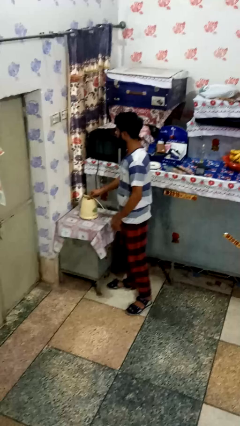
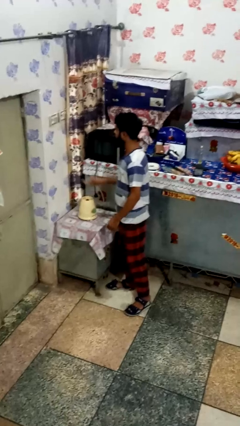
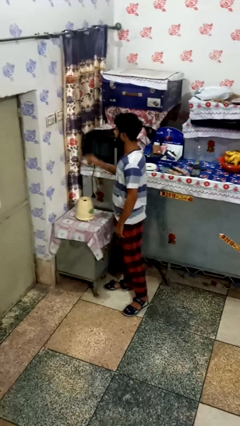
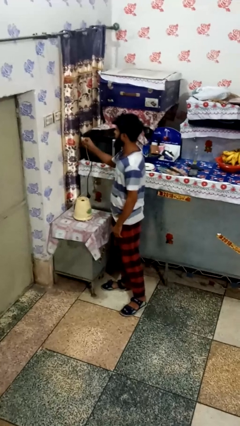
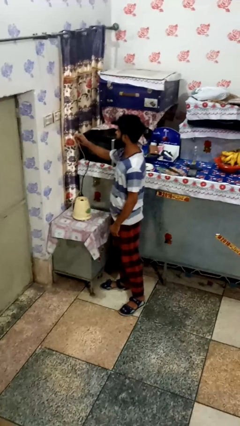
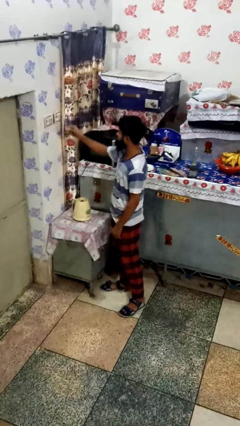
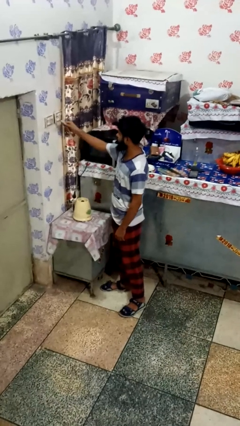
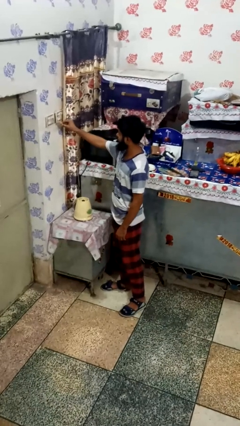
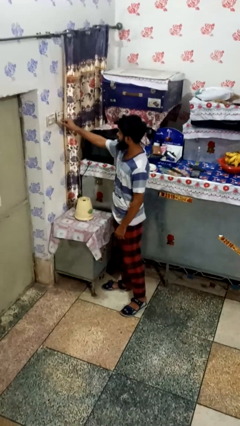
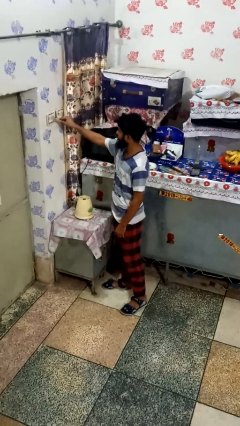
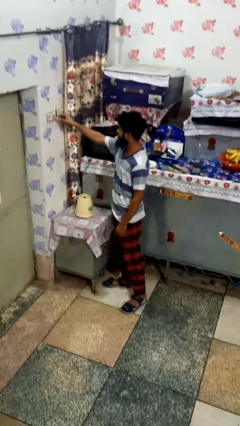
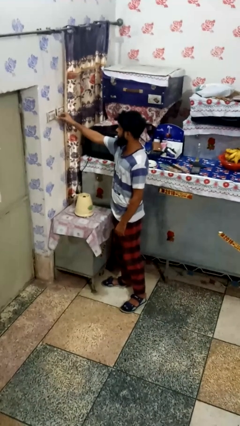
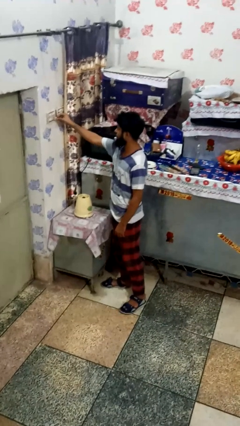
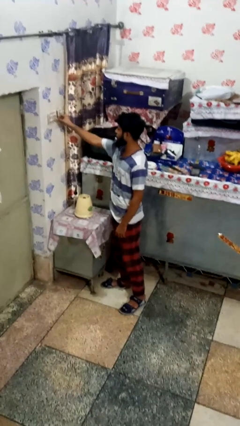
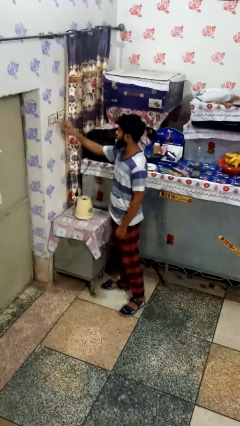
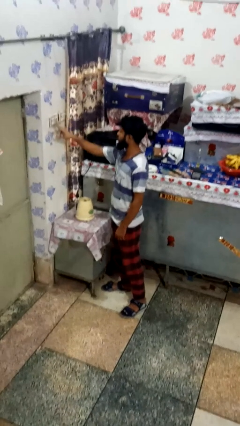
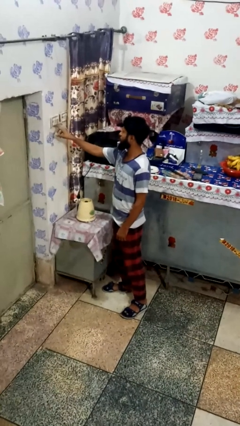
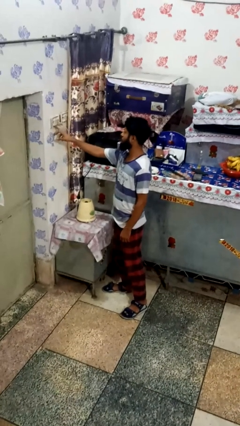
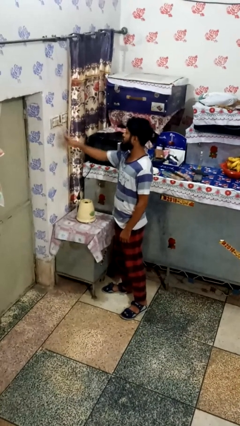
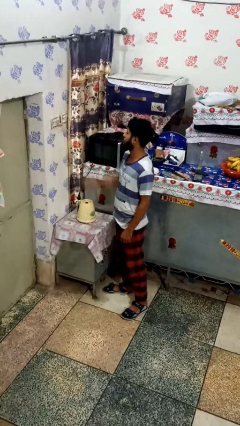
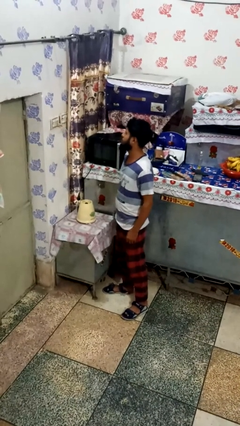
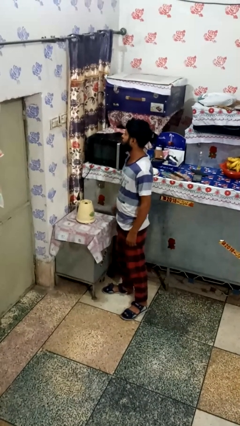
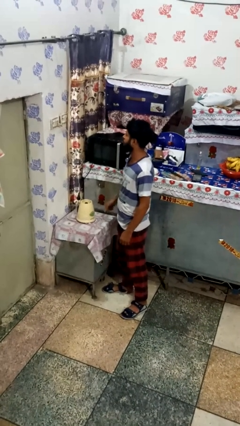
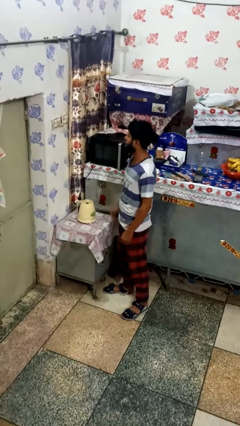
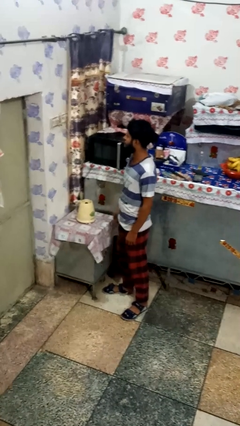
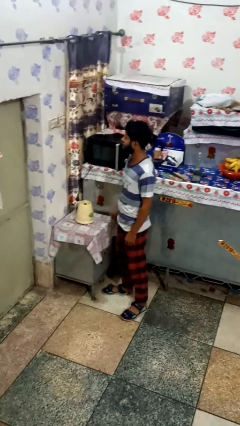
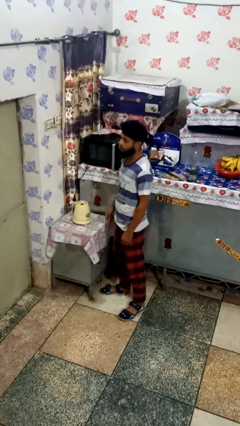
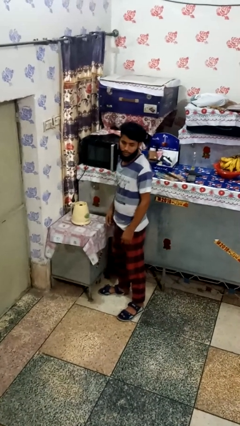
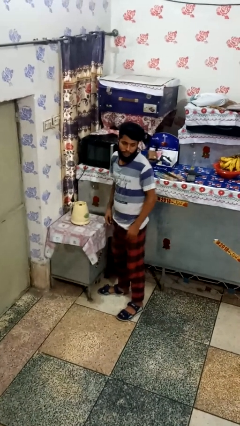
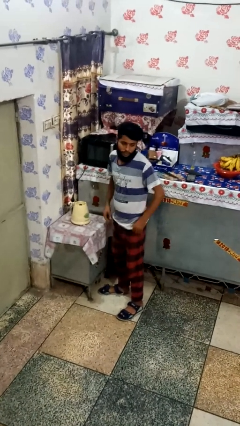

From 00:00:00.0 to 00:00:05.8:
person plugs into electrical socket

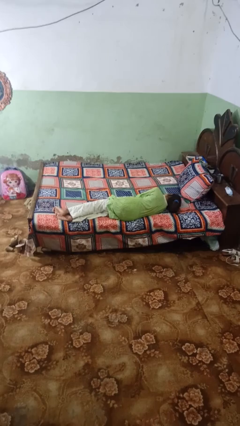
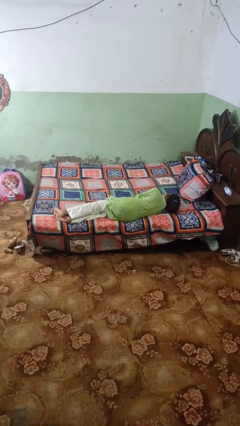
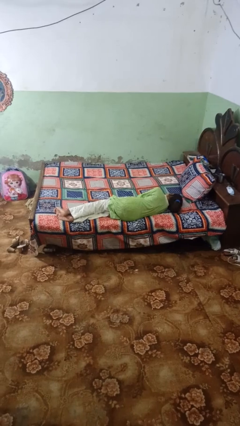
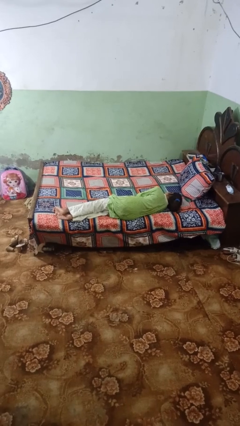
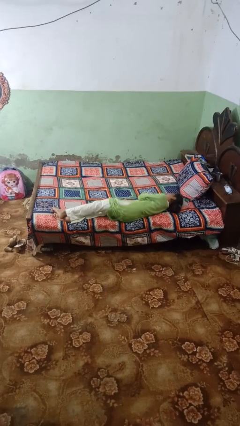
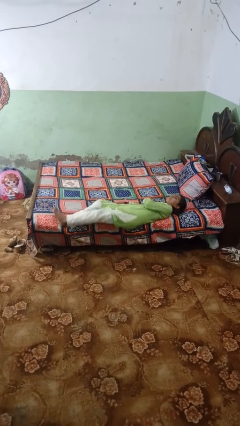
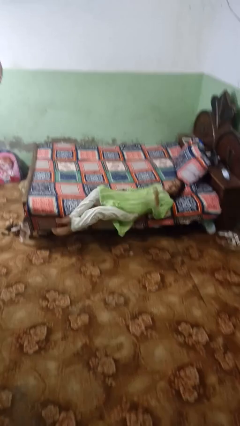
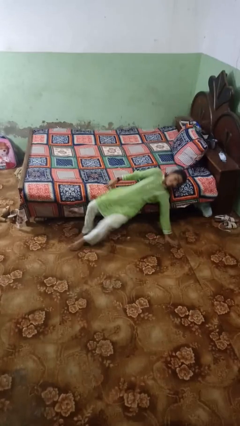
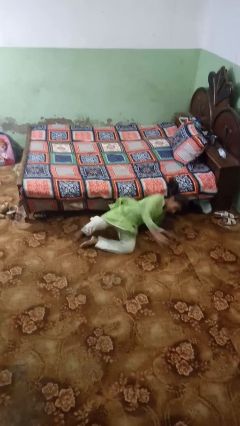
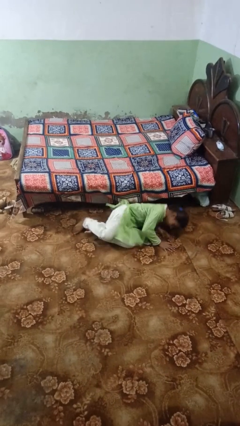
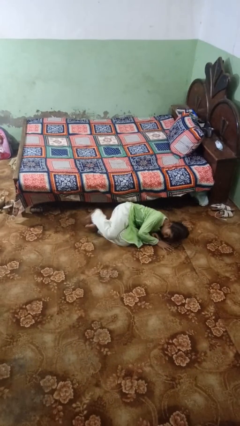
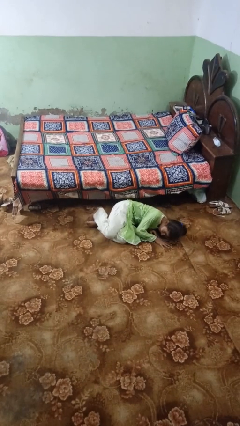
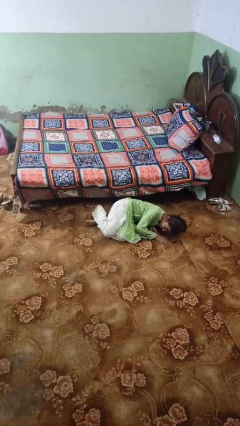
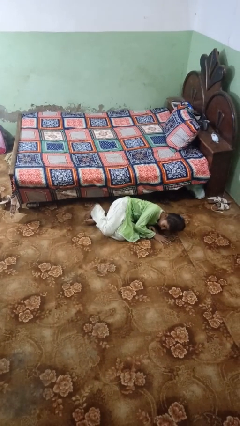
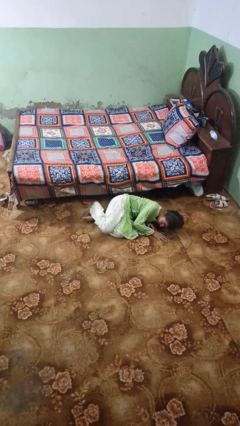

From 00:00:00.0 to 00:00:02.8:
person falls from bed

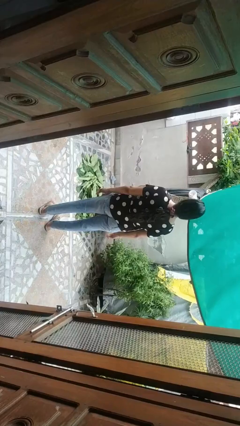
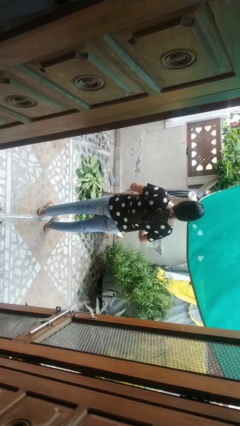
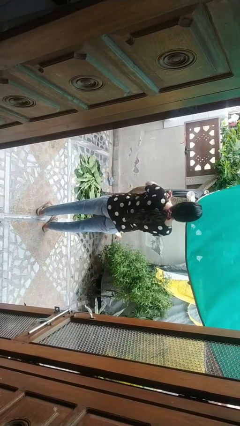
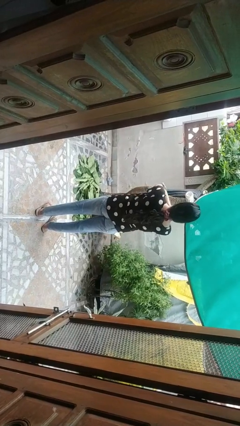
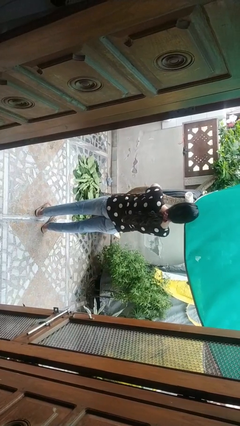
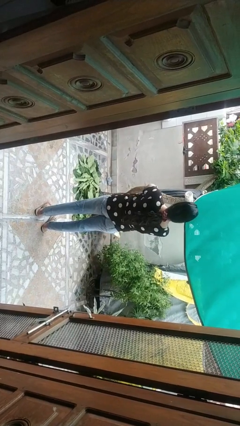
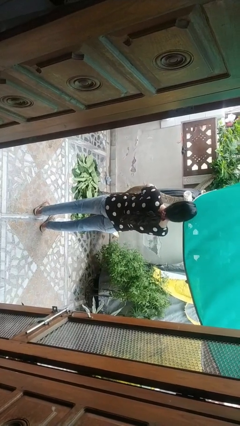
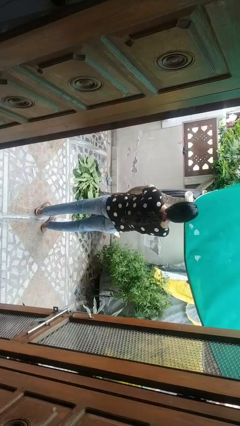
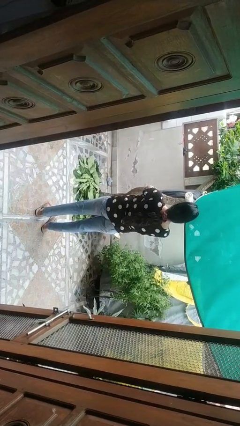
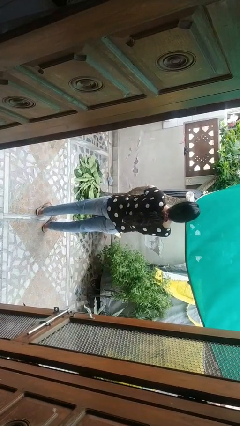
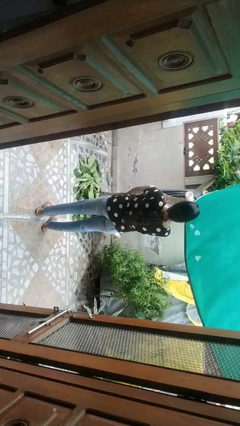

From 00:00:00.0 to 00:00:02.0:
person crosses arms

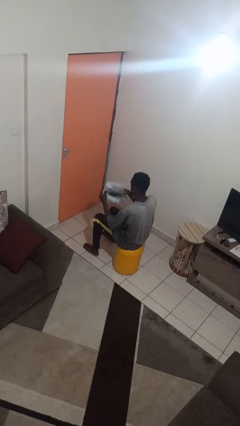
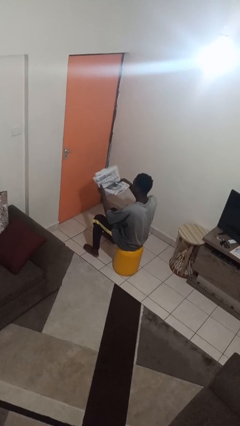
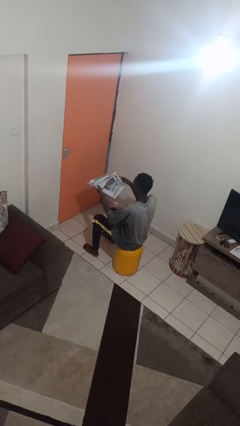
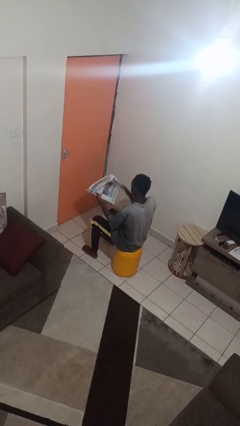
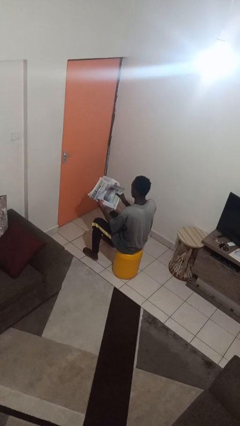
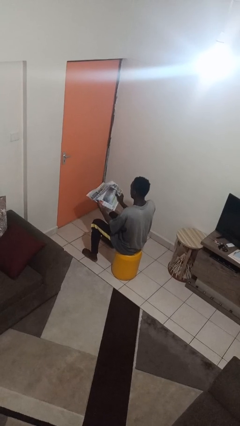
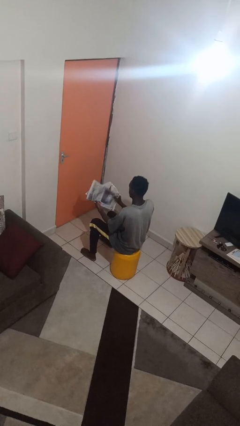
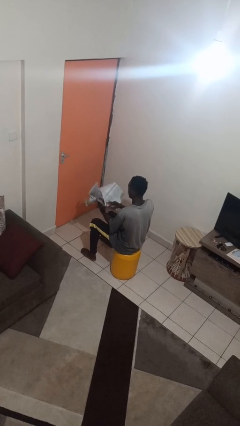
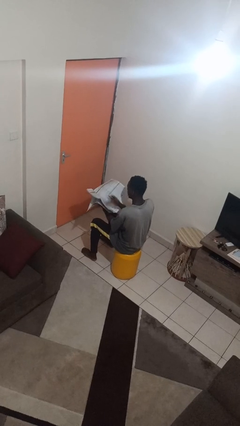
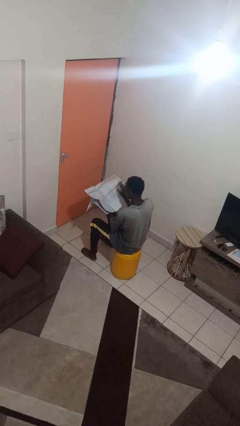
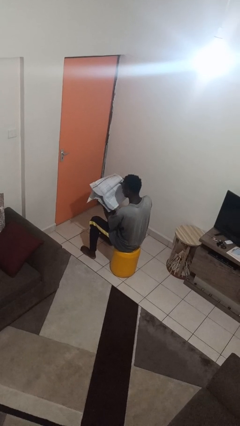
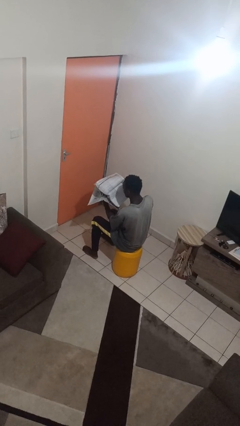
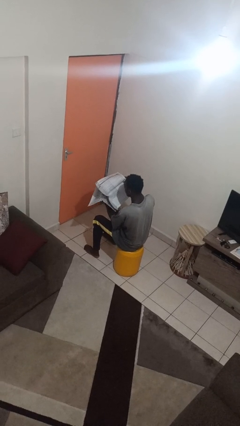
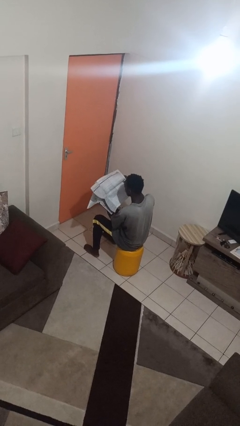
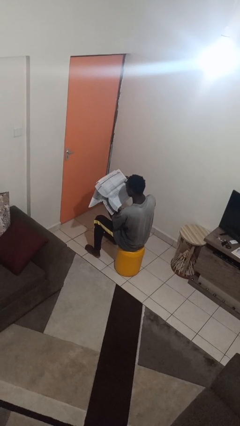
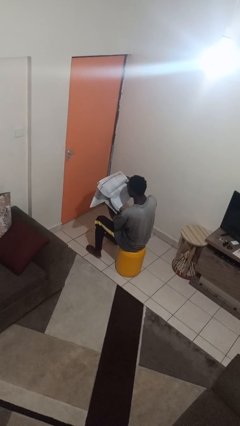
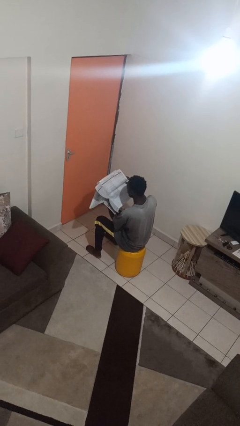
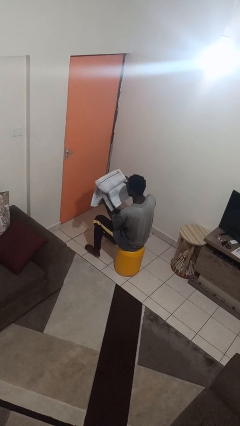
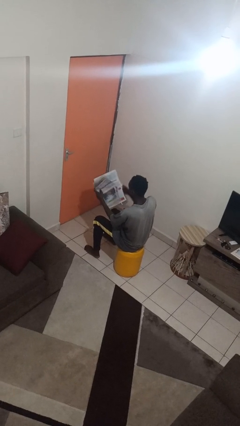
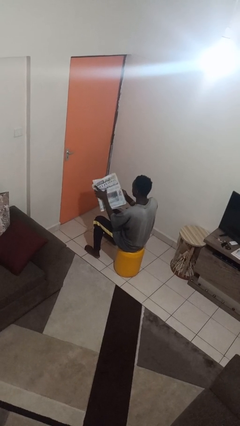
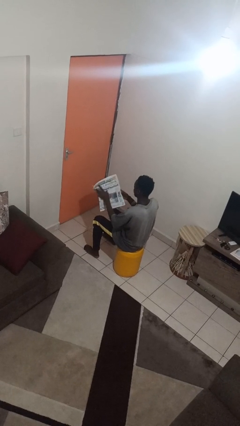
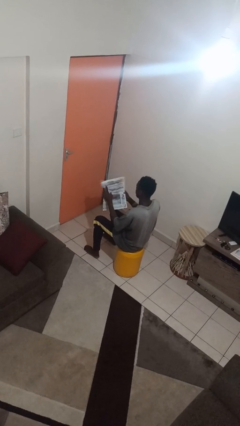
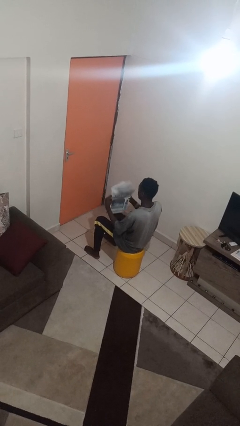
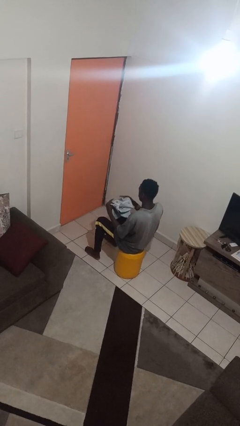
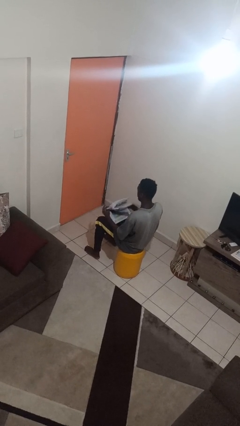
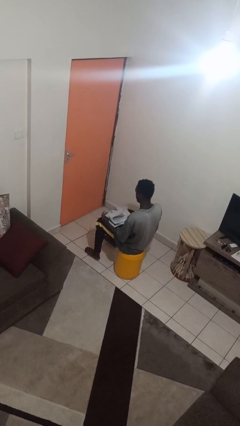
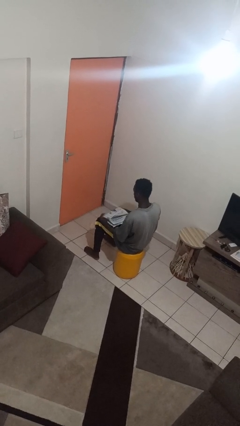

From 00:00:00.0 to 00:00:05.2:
person reads newspaper

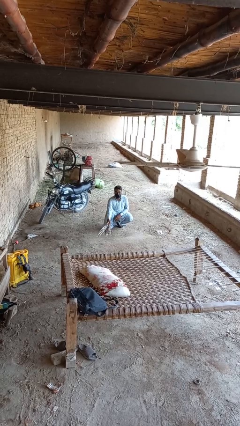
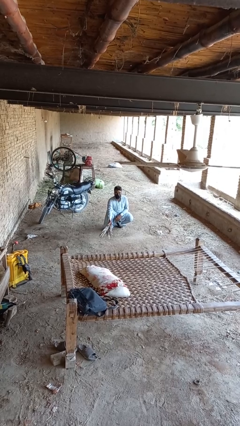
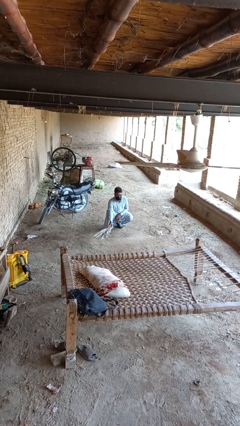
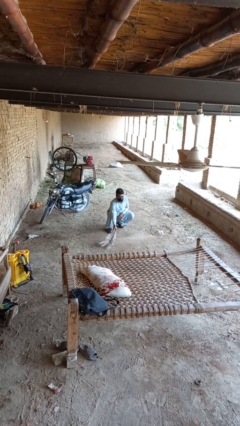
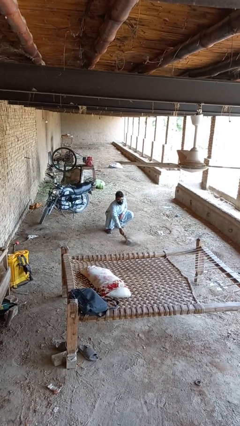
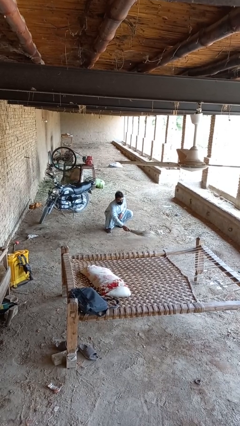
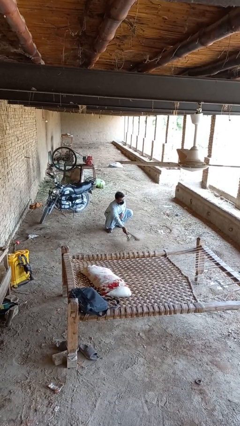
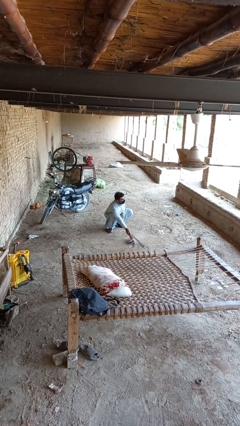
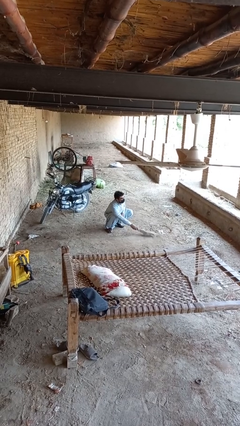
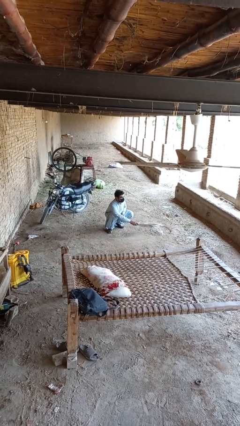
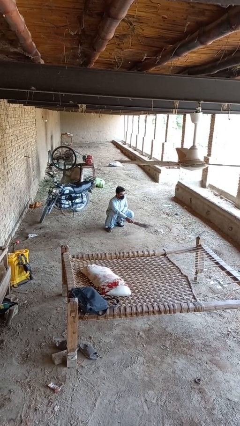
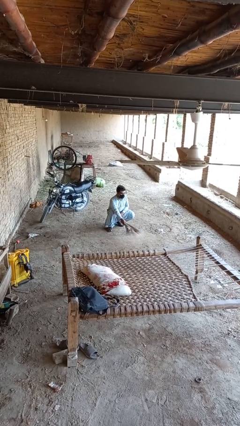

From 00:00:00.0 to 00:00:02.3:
person sweeps floor
